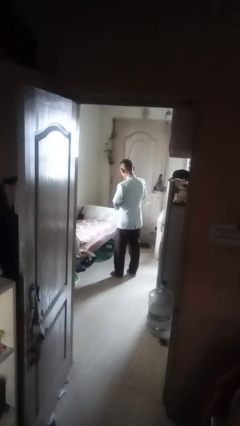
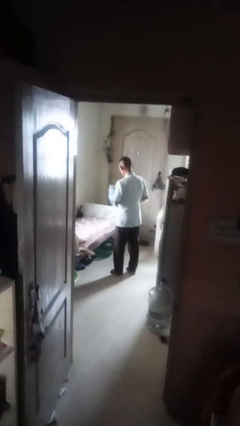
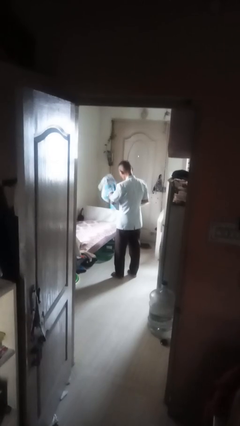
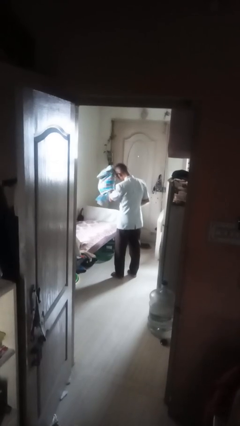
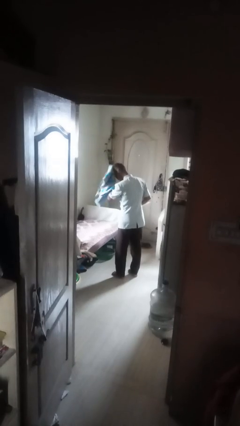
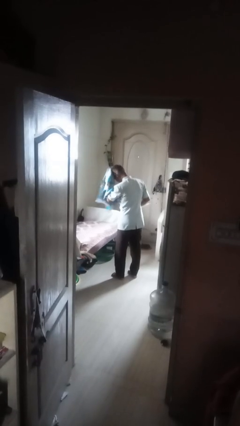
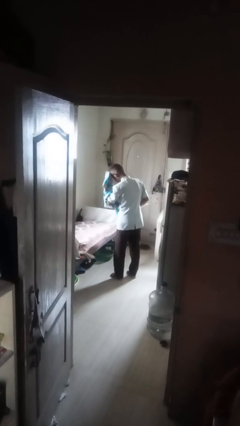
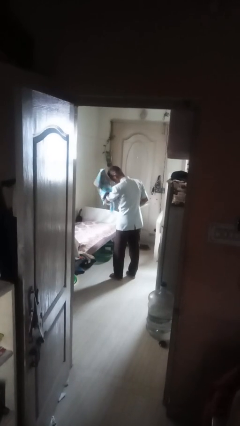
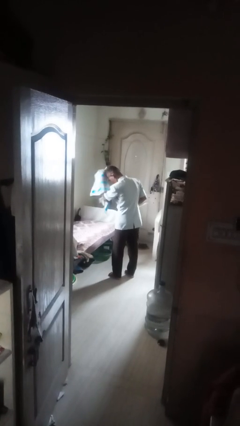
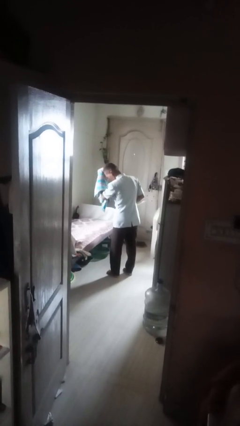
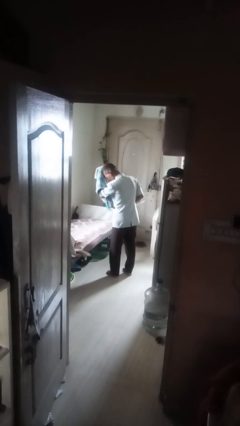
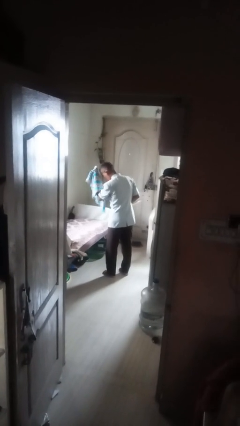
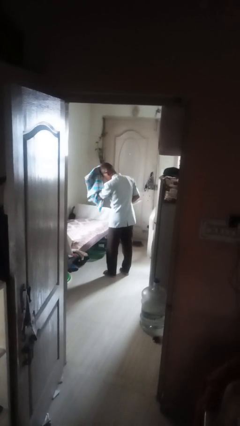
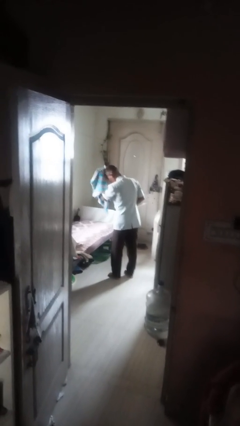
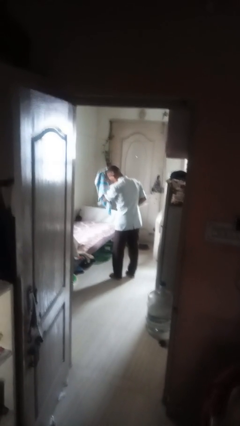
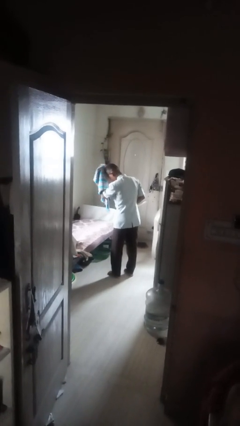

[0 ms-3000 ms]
person dries hair with towel

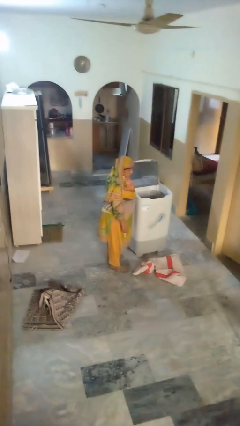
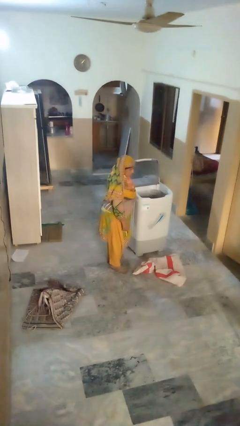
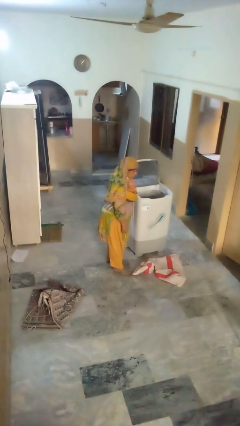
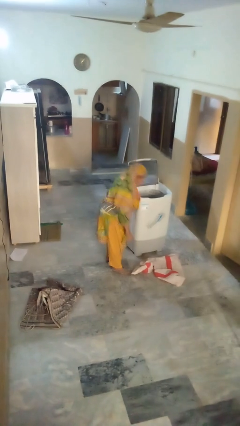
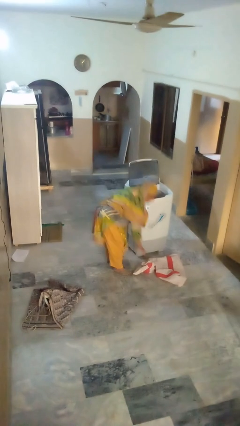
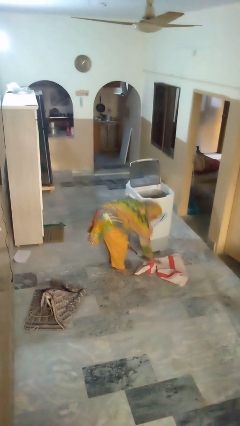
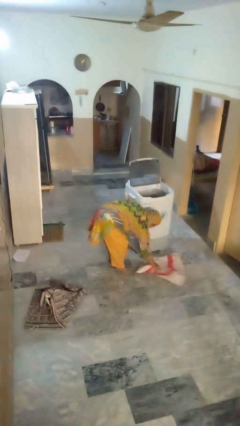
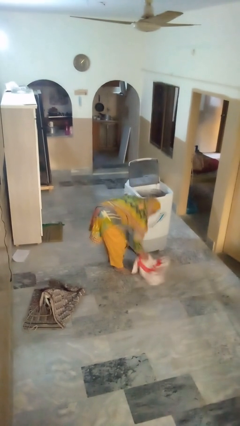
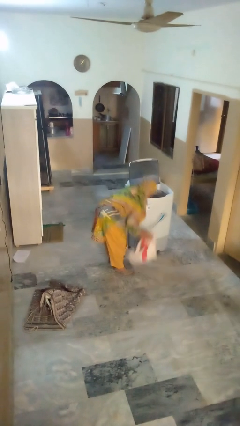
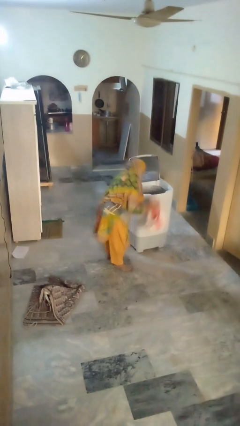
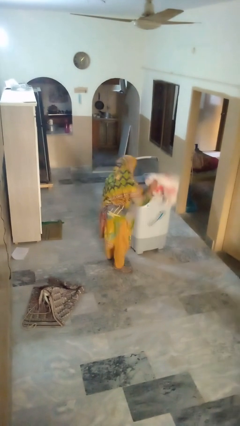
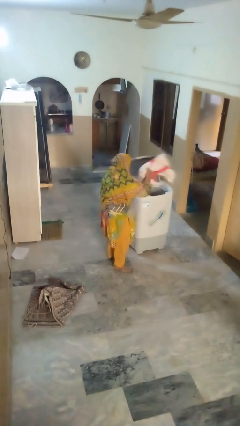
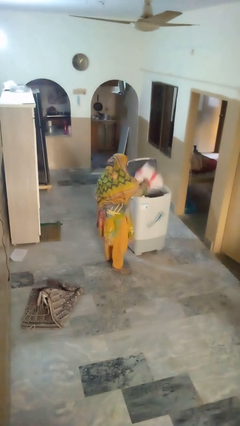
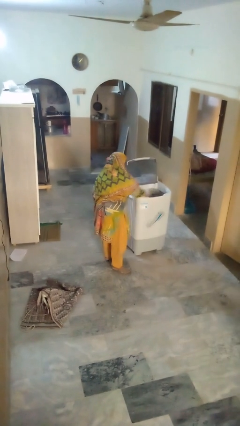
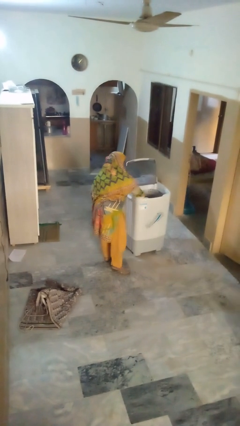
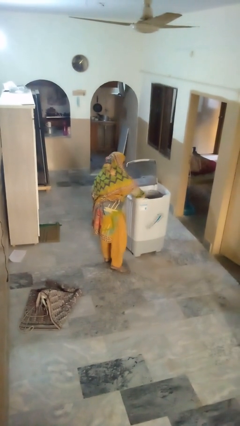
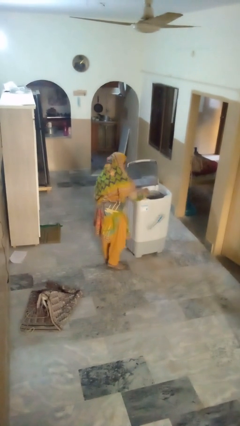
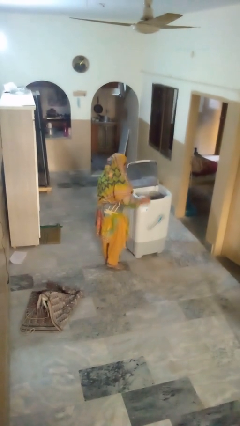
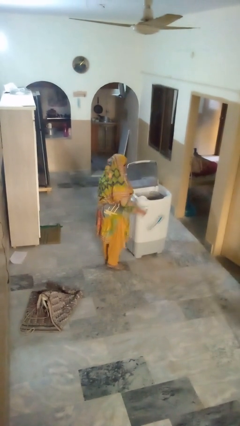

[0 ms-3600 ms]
person loads clotheswasher

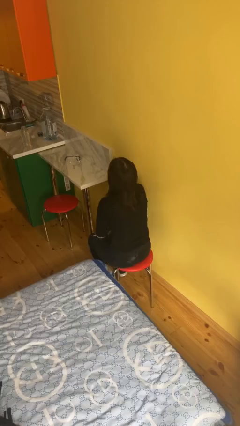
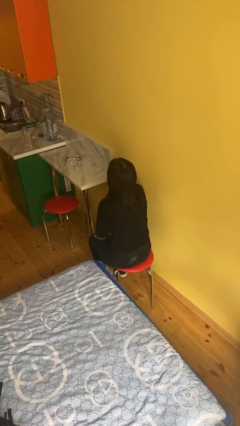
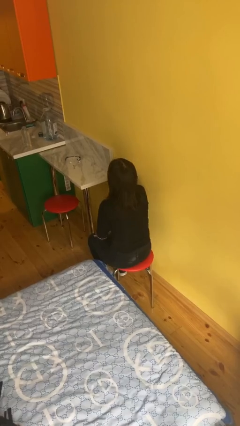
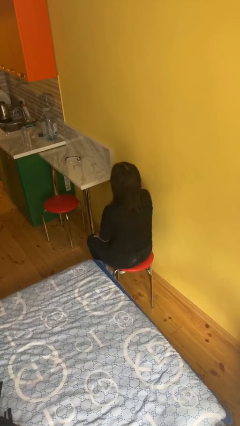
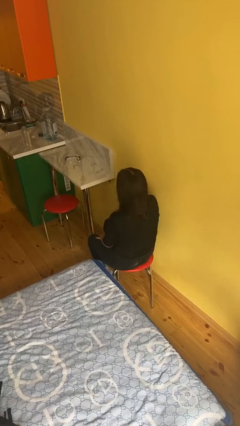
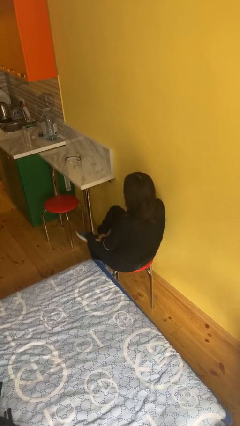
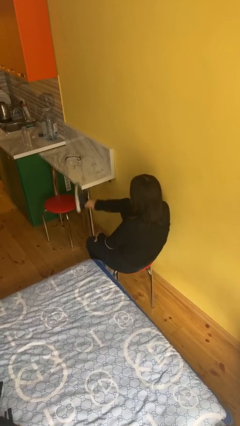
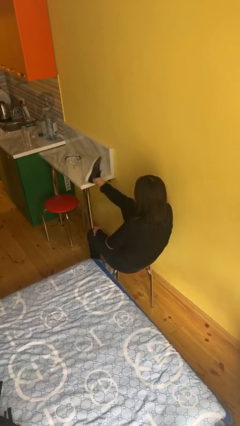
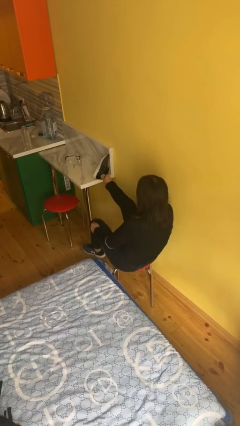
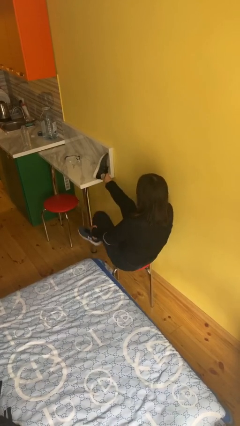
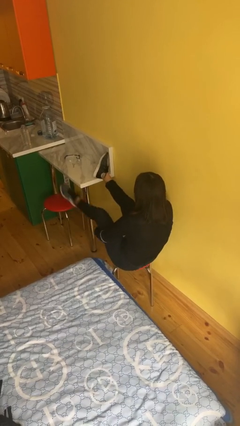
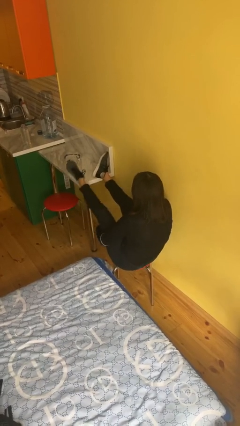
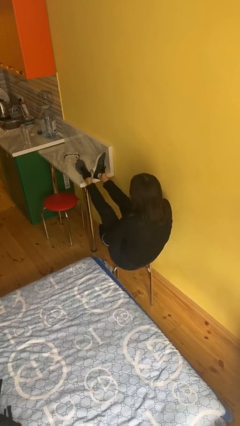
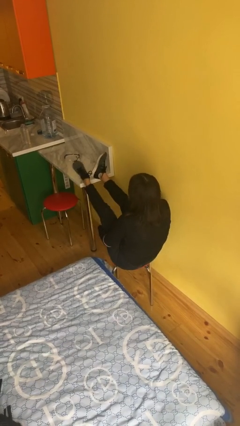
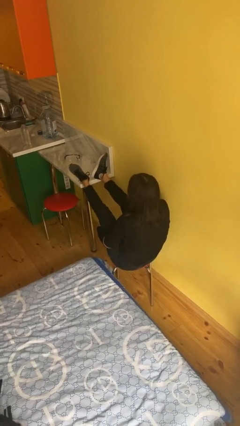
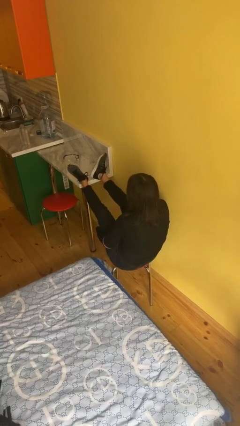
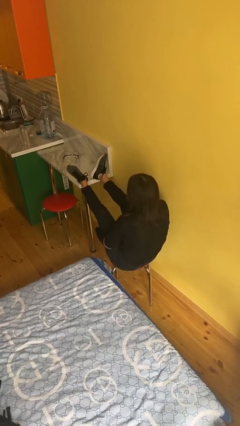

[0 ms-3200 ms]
person puts feet up

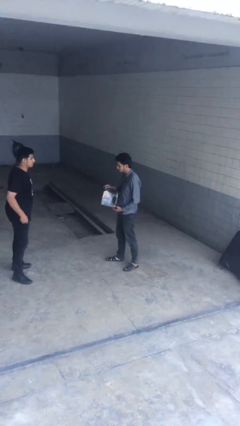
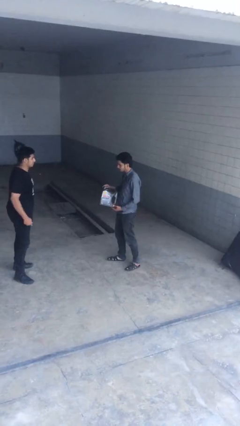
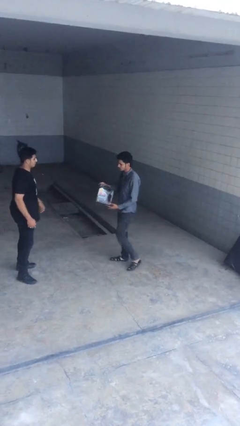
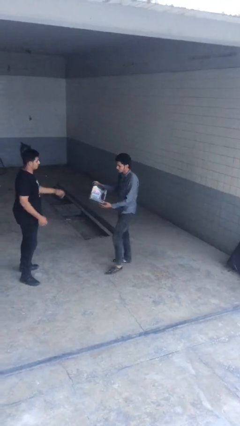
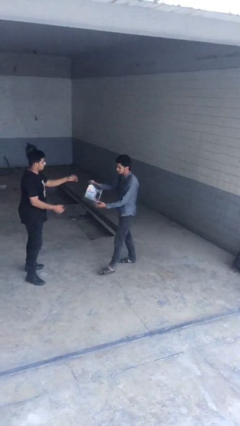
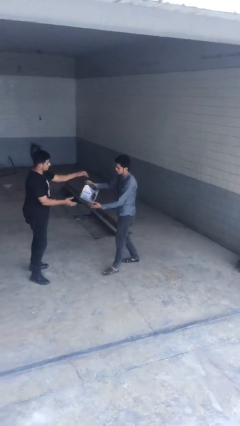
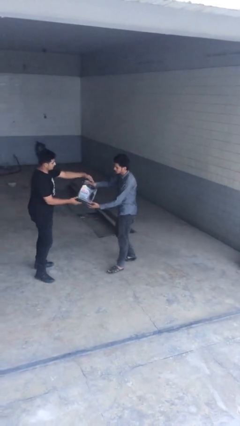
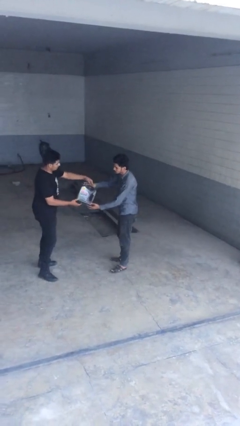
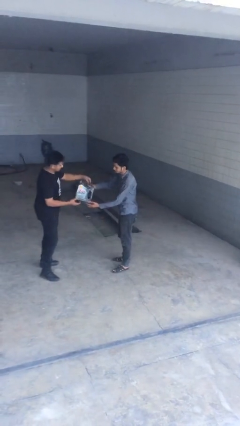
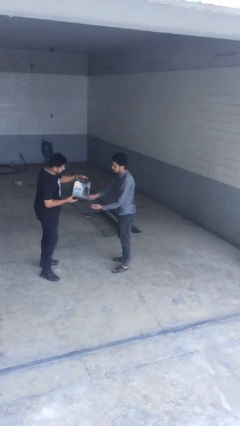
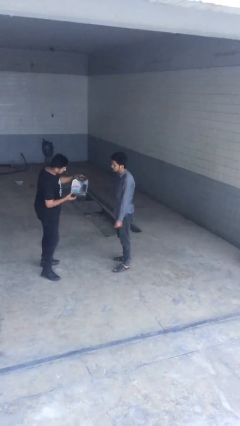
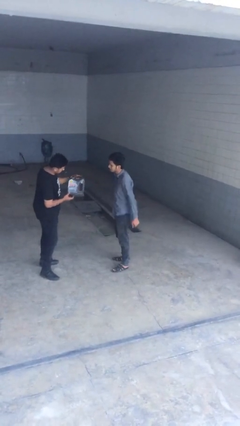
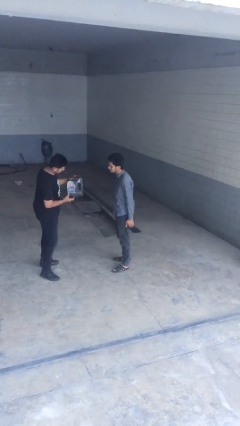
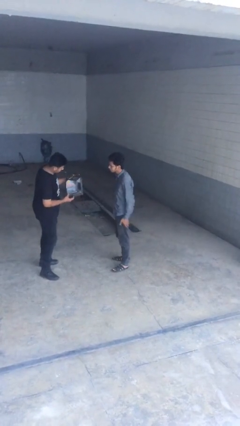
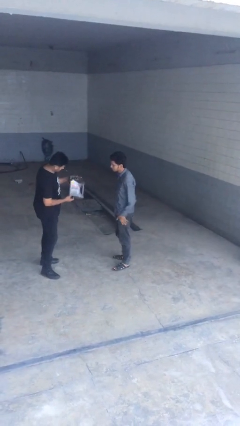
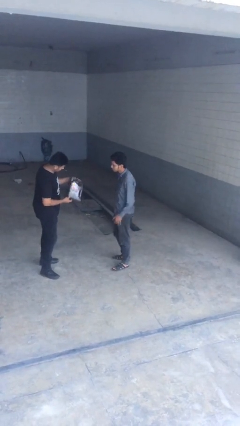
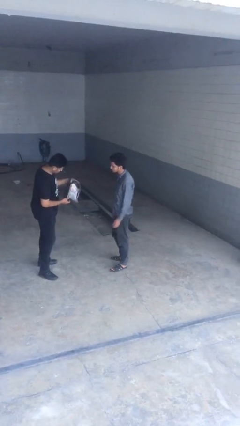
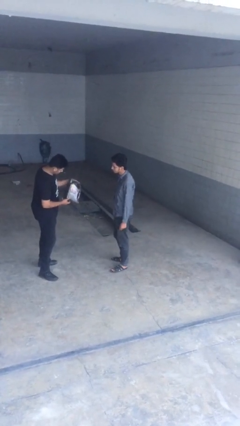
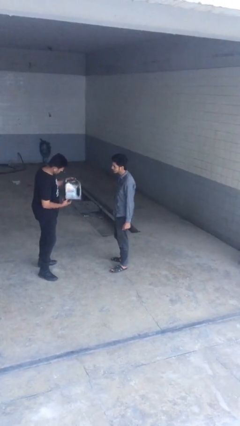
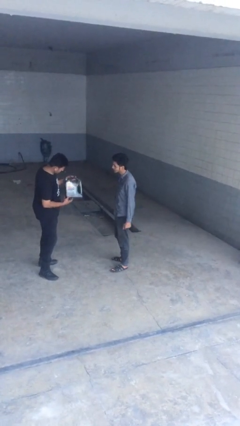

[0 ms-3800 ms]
person transfers object to person

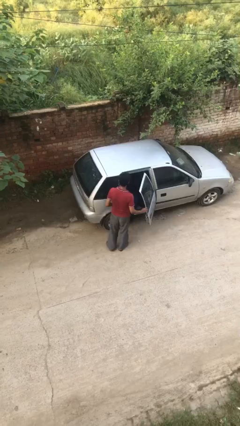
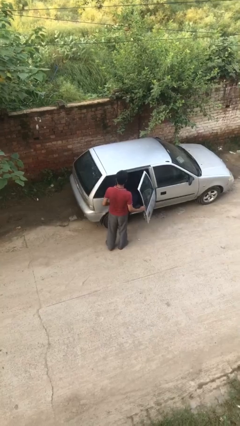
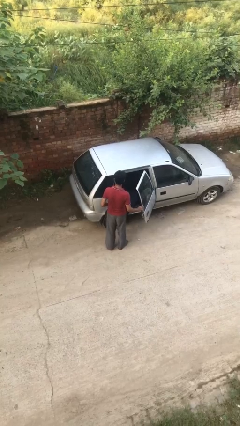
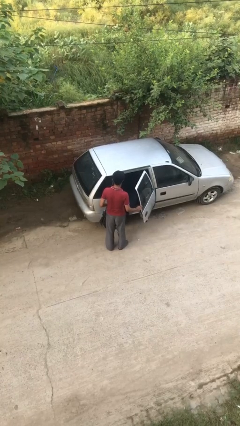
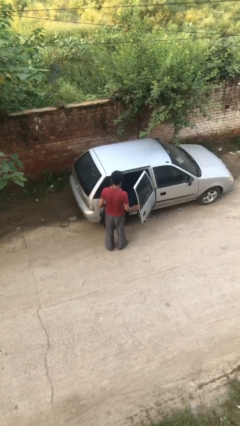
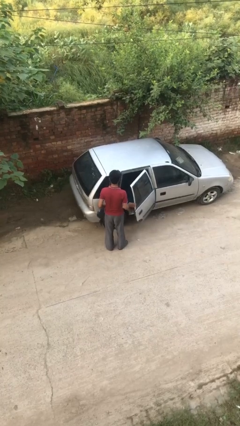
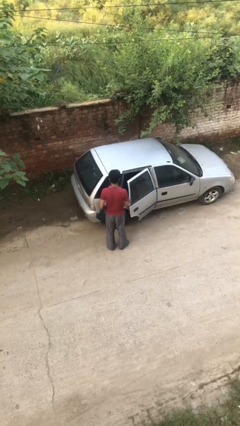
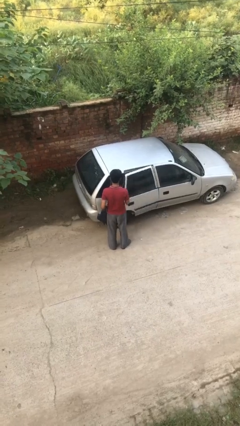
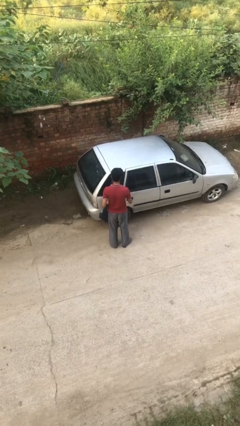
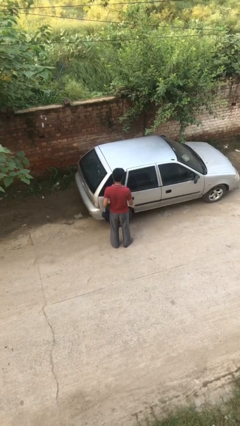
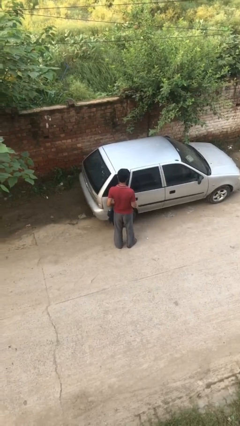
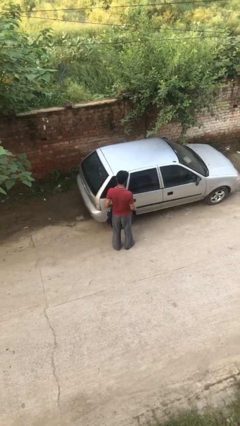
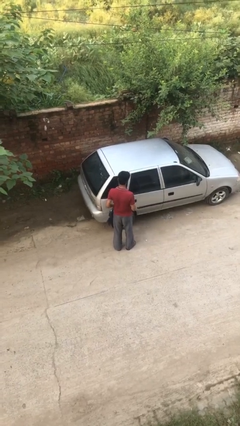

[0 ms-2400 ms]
person closes car door

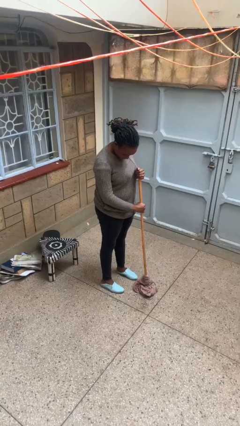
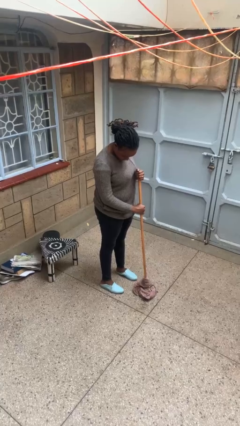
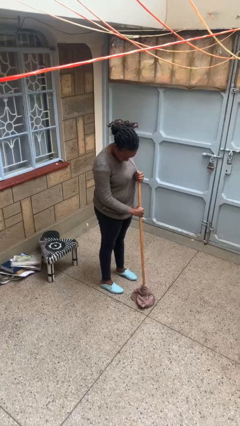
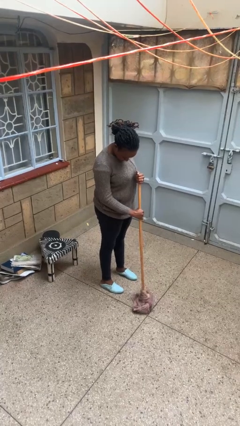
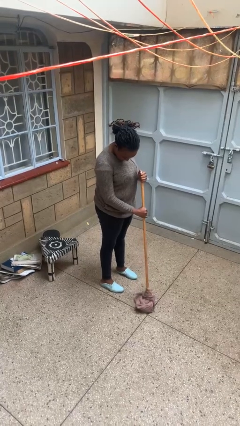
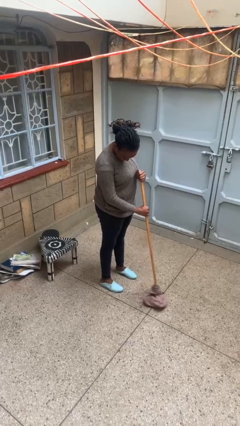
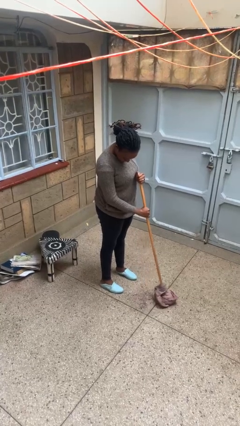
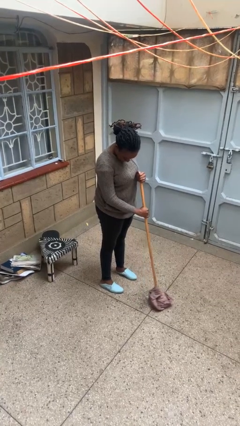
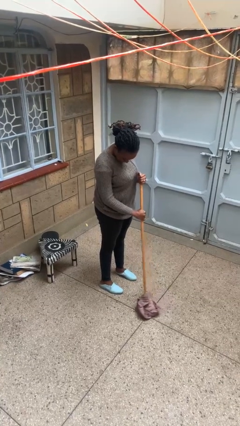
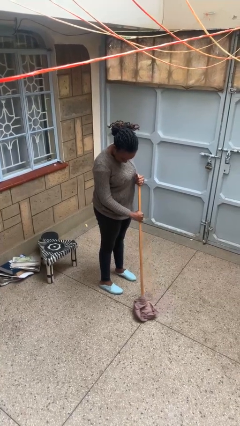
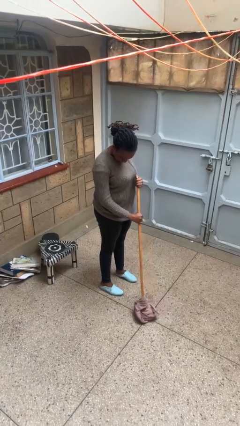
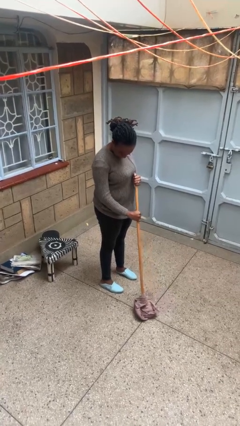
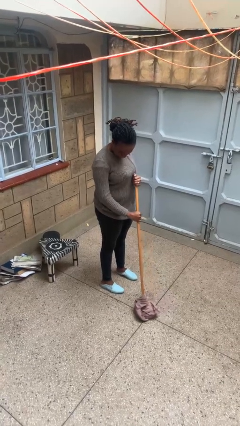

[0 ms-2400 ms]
person mops
